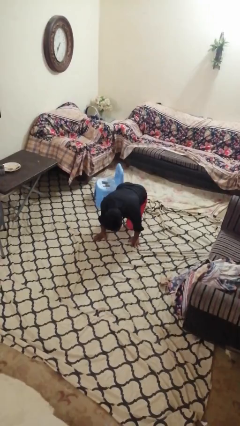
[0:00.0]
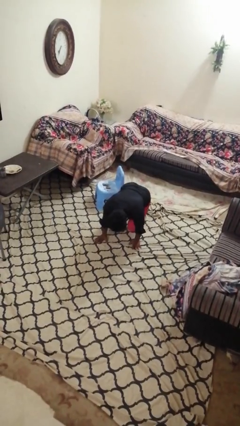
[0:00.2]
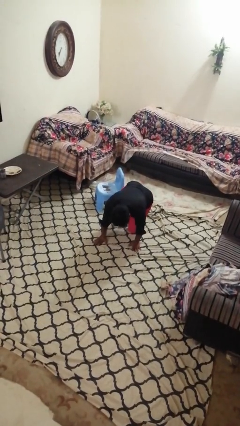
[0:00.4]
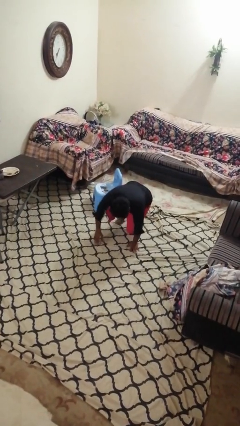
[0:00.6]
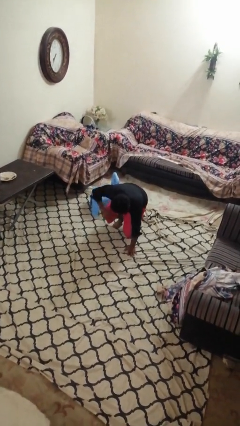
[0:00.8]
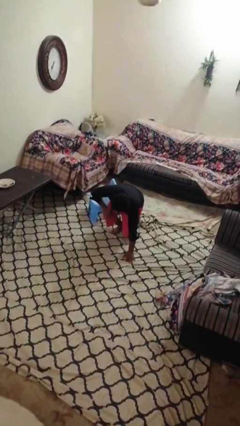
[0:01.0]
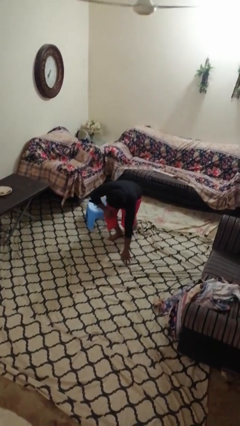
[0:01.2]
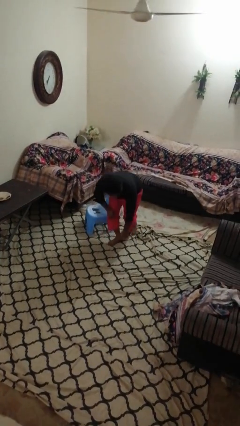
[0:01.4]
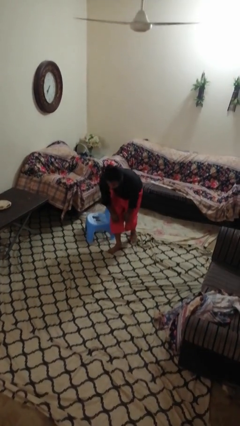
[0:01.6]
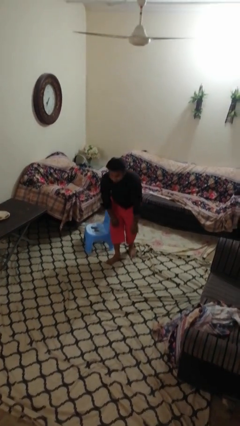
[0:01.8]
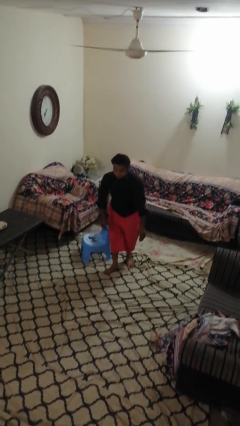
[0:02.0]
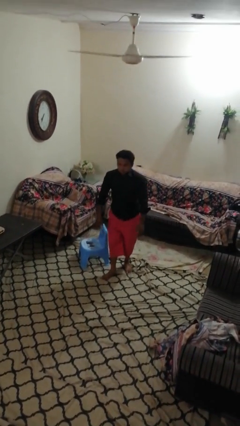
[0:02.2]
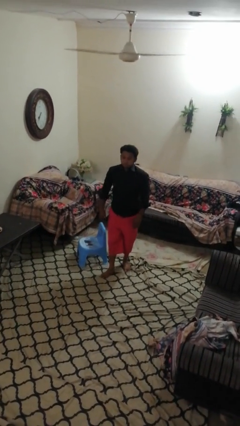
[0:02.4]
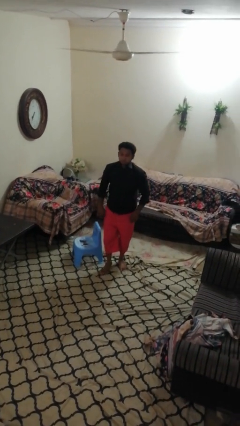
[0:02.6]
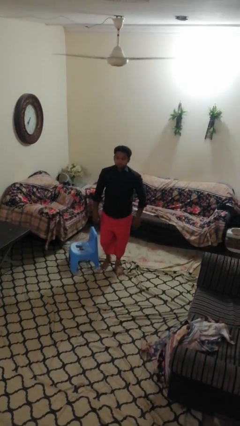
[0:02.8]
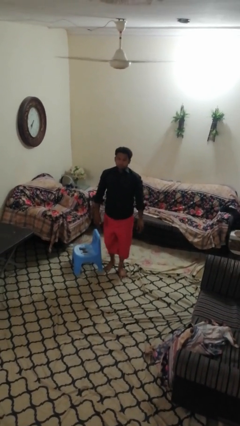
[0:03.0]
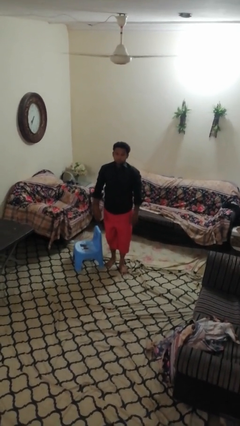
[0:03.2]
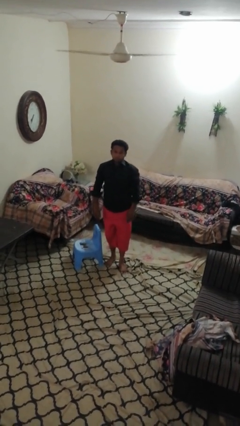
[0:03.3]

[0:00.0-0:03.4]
person stands up from floor

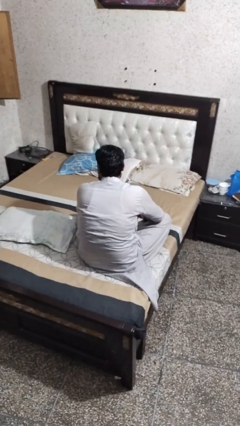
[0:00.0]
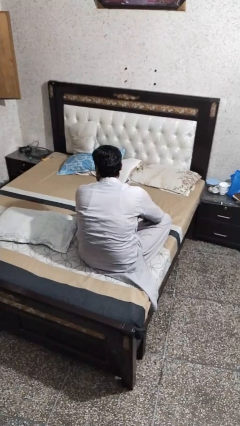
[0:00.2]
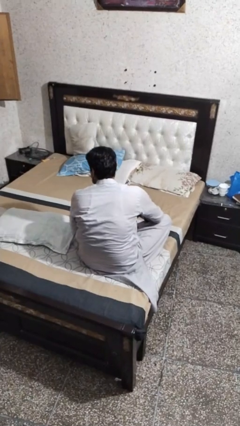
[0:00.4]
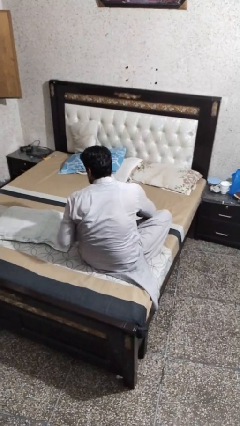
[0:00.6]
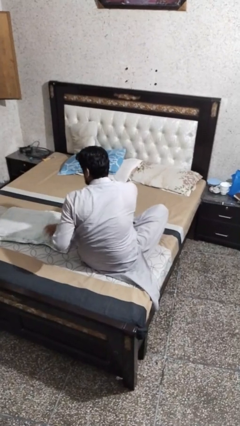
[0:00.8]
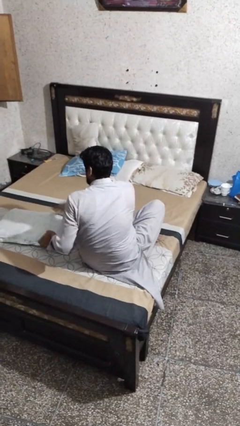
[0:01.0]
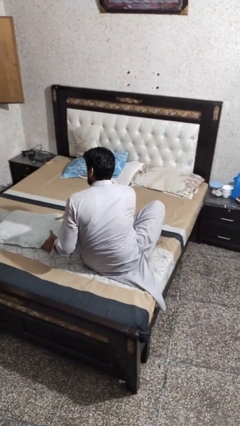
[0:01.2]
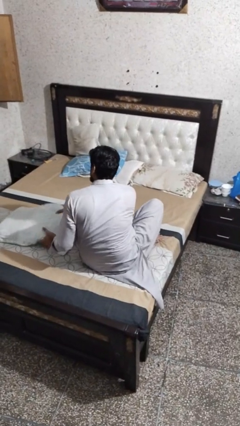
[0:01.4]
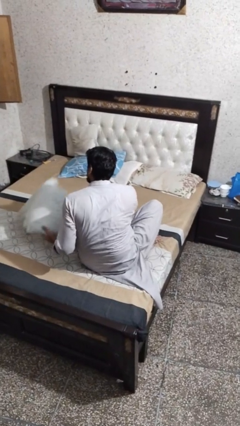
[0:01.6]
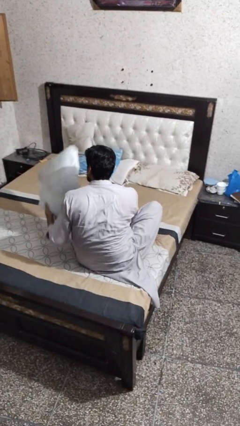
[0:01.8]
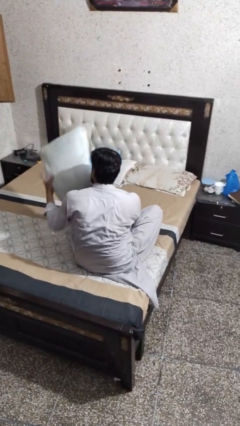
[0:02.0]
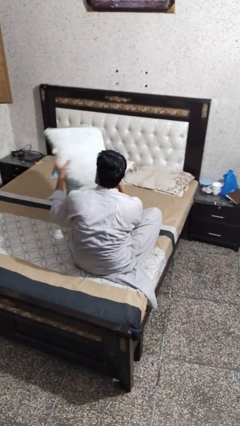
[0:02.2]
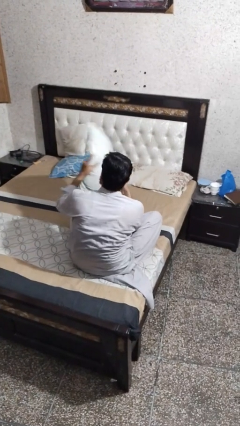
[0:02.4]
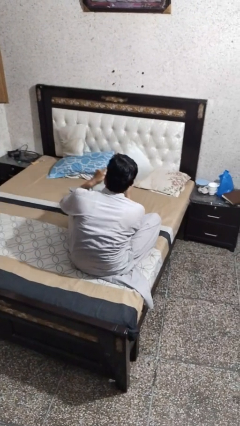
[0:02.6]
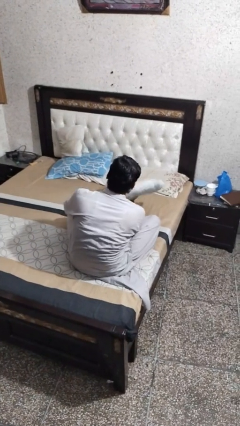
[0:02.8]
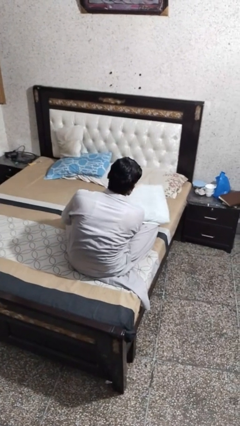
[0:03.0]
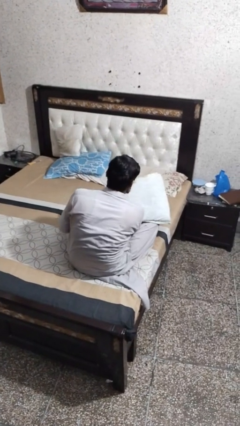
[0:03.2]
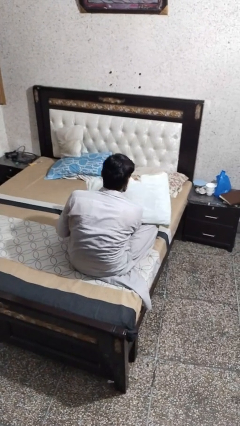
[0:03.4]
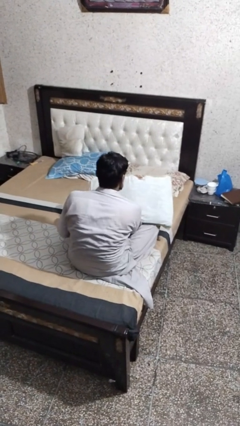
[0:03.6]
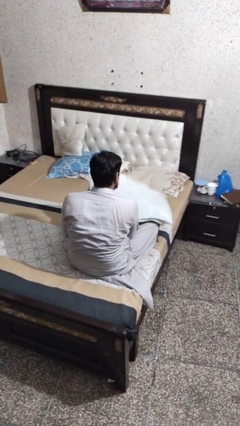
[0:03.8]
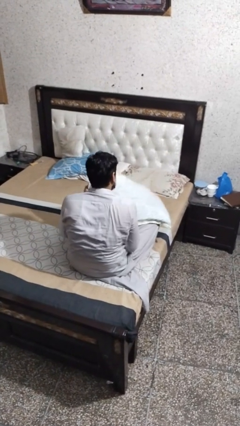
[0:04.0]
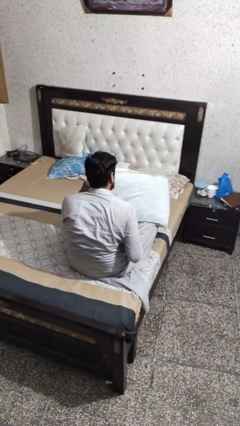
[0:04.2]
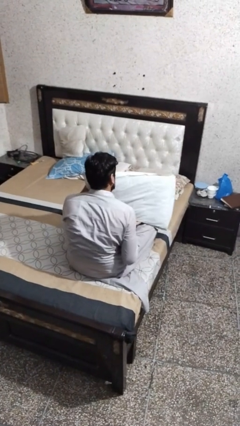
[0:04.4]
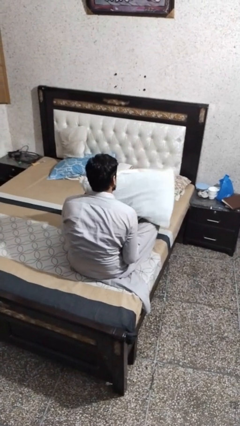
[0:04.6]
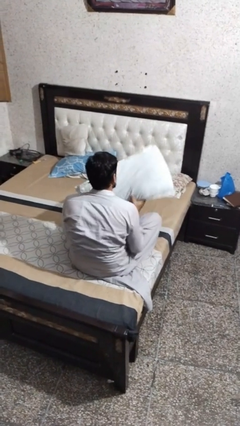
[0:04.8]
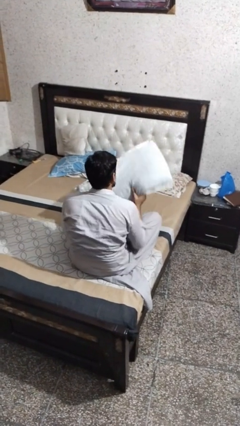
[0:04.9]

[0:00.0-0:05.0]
person picks up object from bed

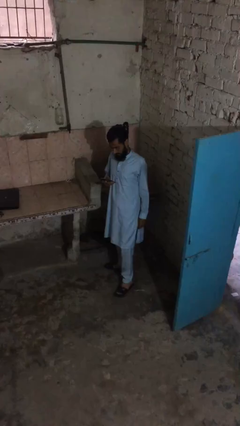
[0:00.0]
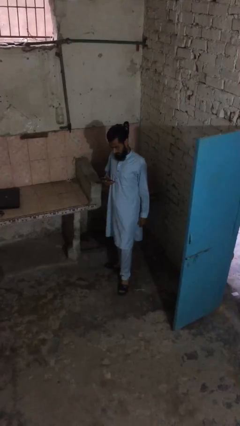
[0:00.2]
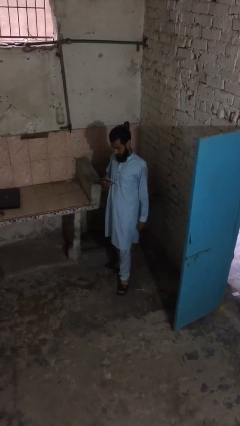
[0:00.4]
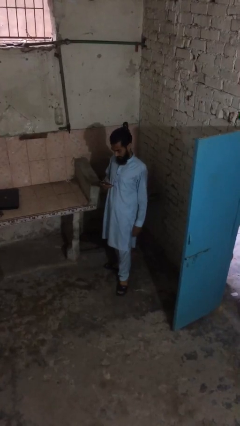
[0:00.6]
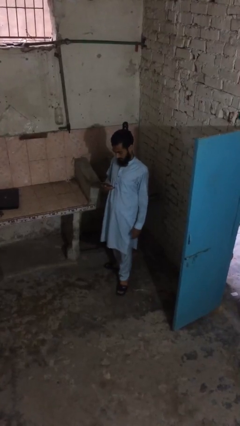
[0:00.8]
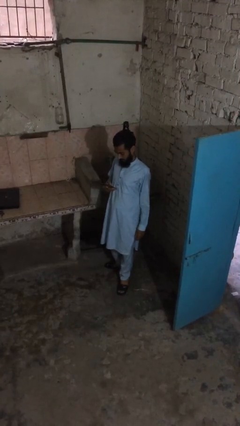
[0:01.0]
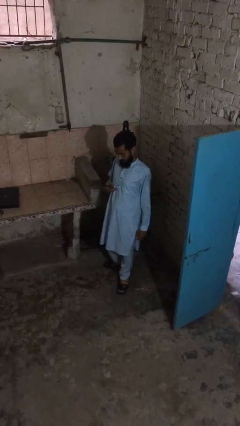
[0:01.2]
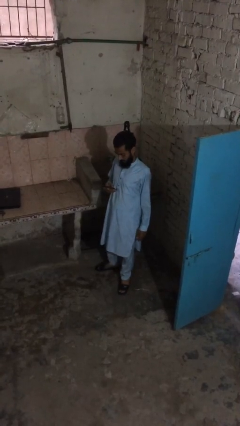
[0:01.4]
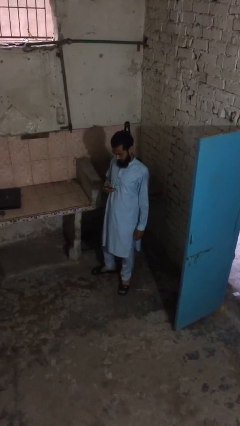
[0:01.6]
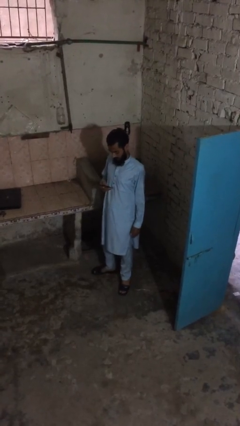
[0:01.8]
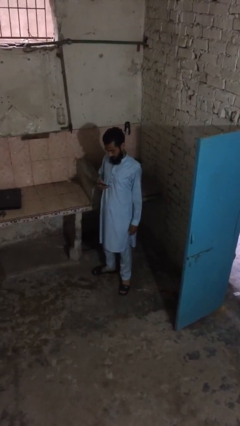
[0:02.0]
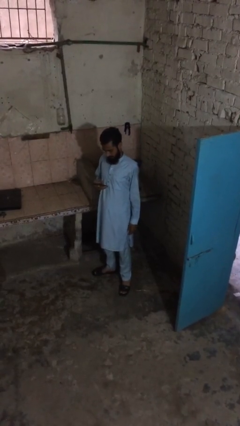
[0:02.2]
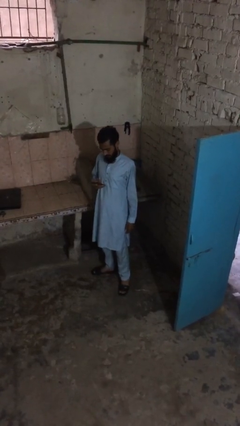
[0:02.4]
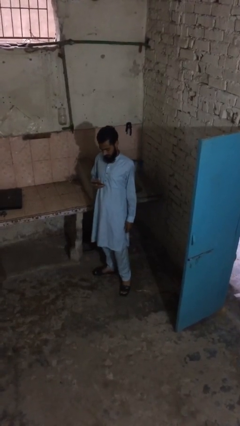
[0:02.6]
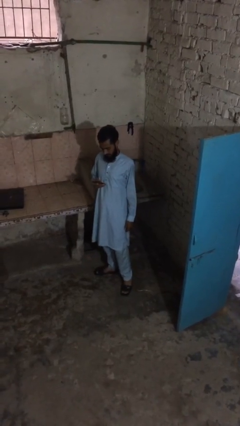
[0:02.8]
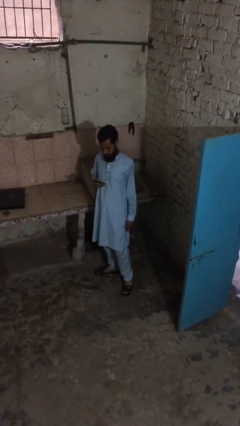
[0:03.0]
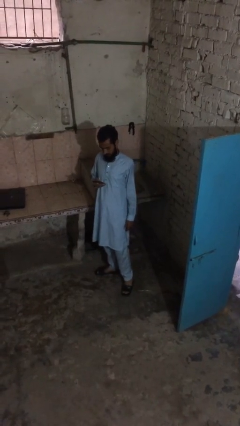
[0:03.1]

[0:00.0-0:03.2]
person texts on phone

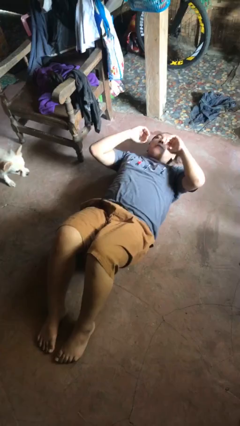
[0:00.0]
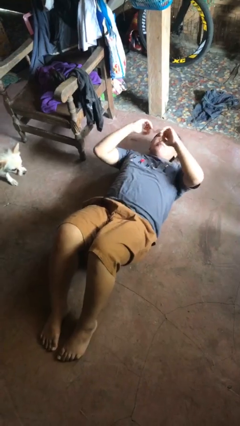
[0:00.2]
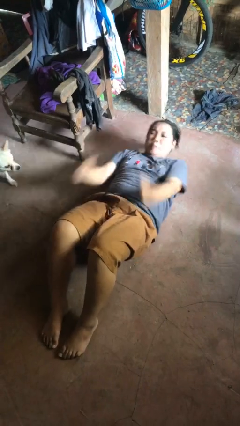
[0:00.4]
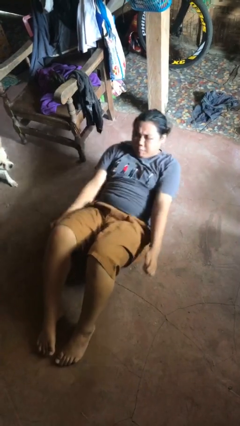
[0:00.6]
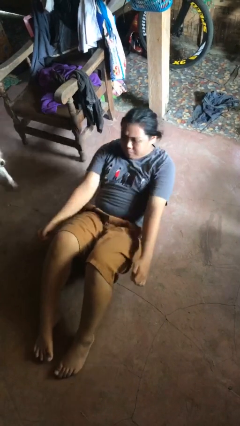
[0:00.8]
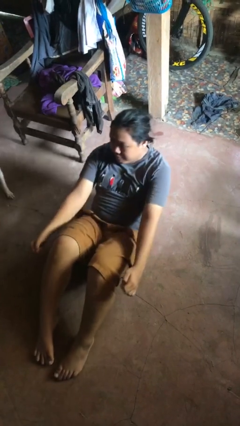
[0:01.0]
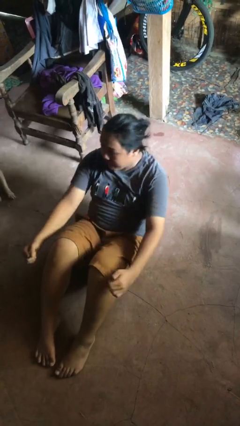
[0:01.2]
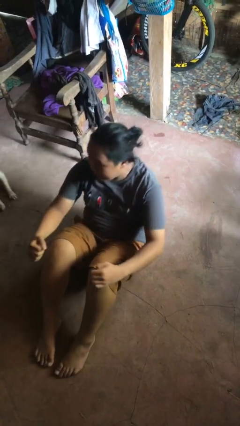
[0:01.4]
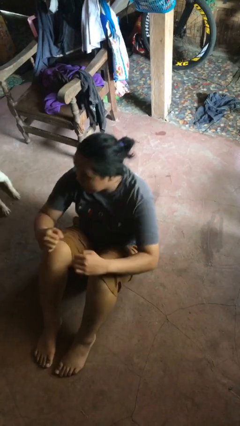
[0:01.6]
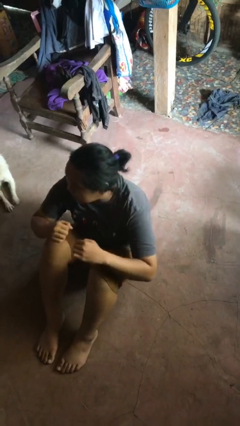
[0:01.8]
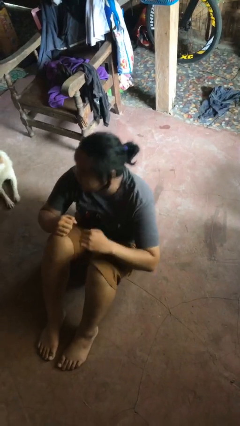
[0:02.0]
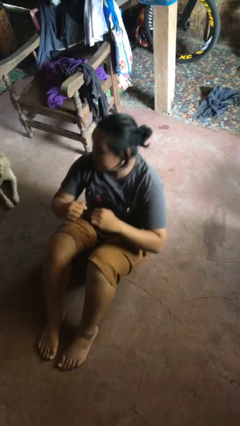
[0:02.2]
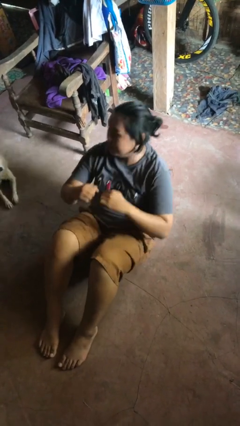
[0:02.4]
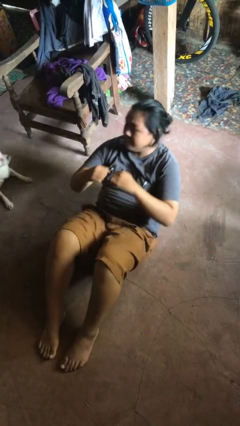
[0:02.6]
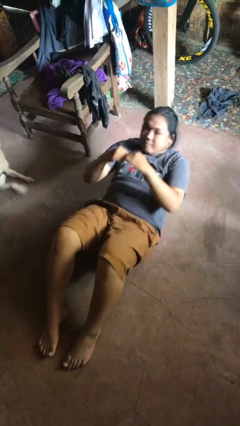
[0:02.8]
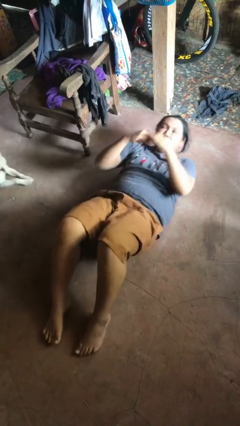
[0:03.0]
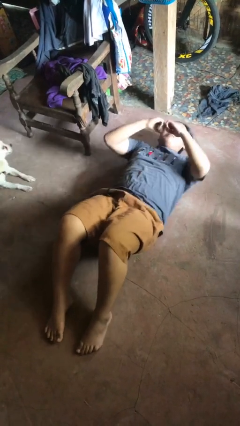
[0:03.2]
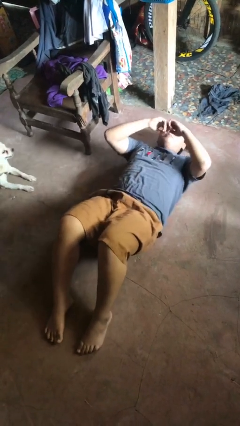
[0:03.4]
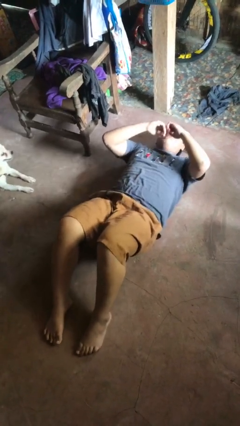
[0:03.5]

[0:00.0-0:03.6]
person exercises with situp

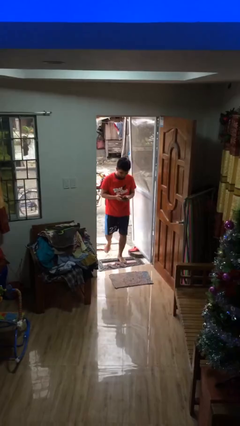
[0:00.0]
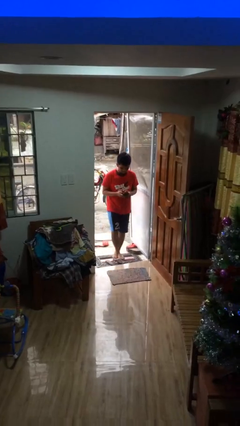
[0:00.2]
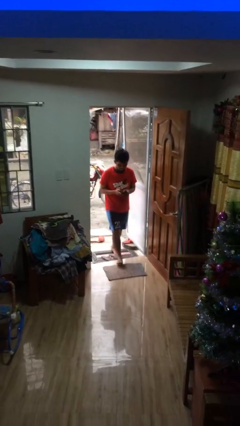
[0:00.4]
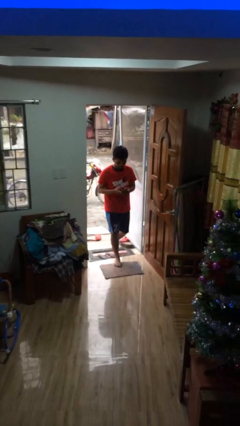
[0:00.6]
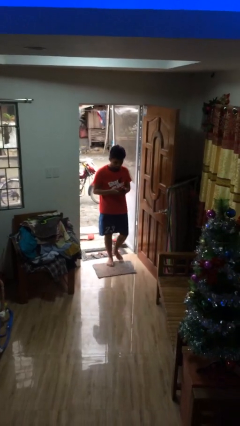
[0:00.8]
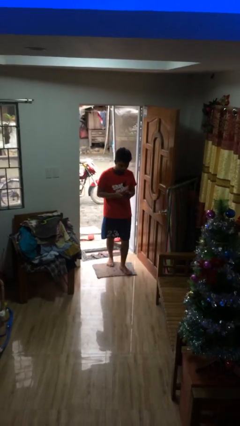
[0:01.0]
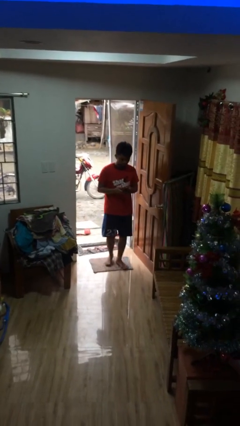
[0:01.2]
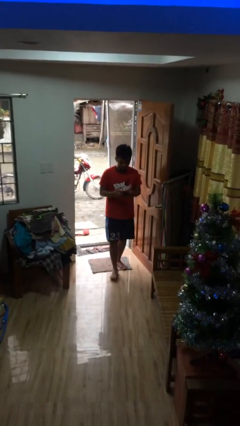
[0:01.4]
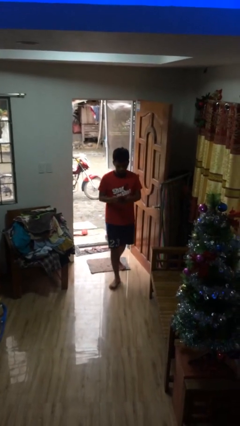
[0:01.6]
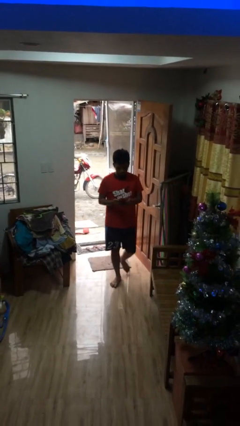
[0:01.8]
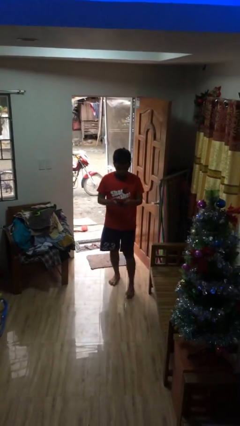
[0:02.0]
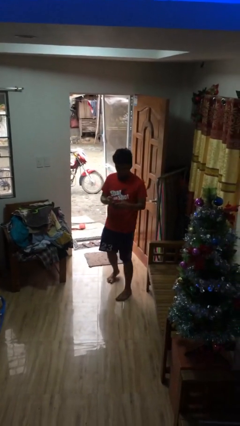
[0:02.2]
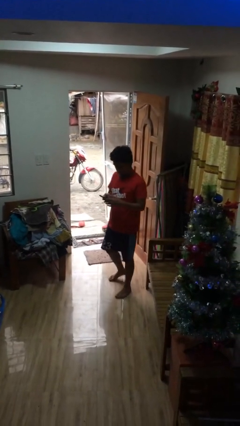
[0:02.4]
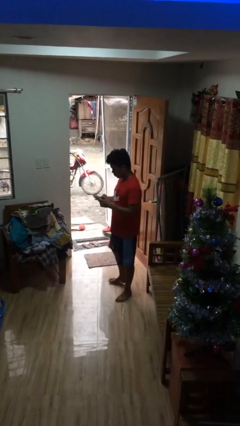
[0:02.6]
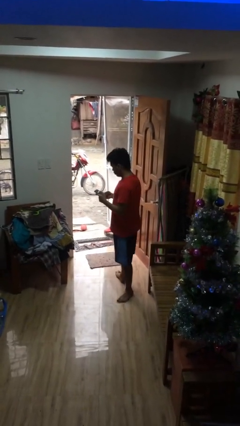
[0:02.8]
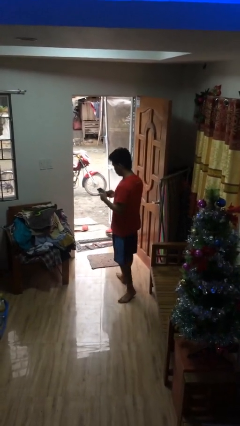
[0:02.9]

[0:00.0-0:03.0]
person enters scene through structure
